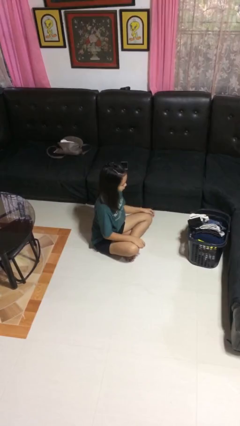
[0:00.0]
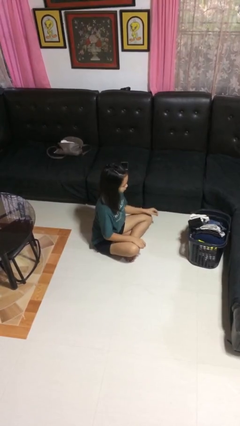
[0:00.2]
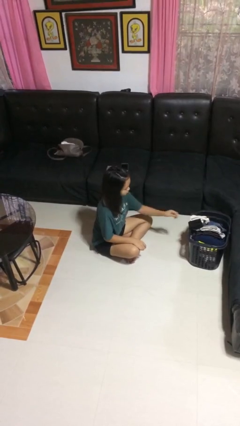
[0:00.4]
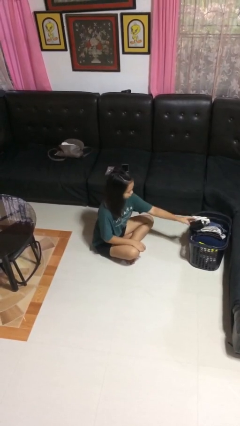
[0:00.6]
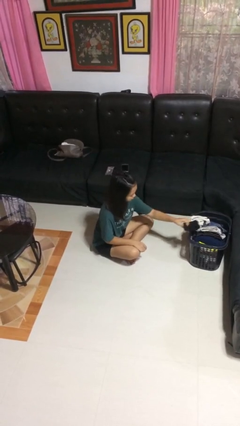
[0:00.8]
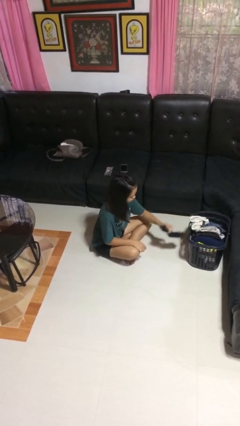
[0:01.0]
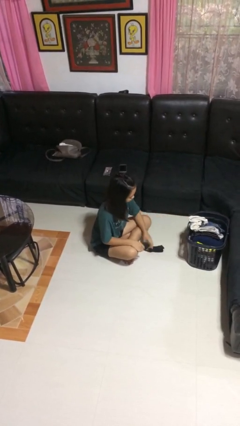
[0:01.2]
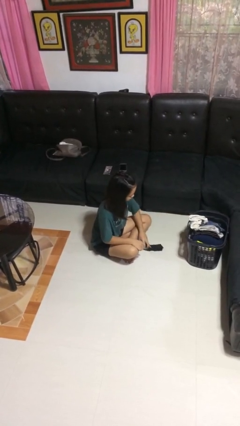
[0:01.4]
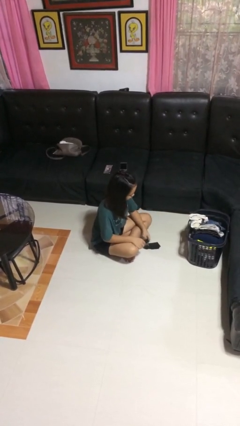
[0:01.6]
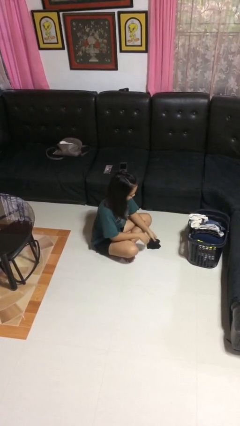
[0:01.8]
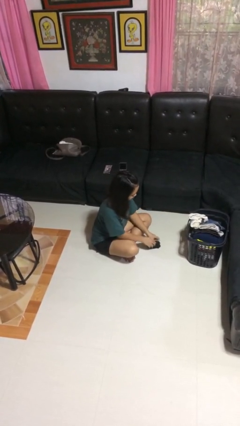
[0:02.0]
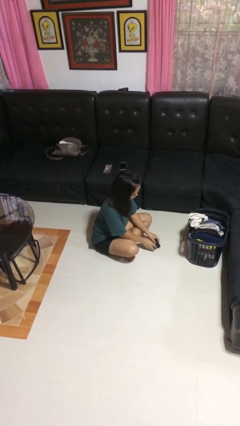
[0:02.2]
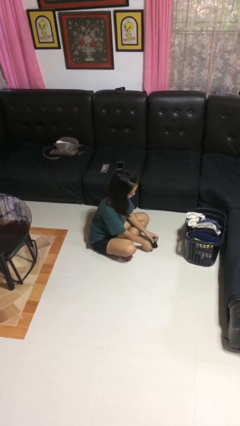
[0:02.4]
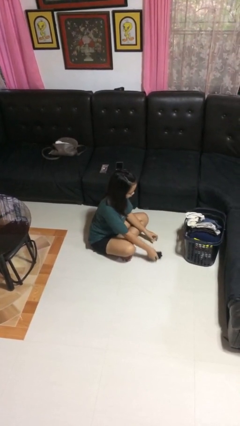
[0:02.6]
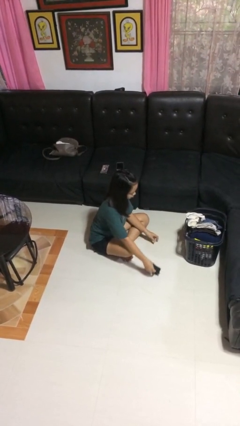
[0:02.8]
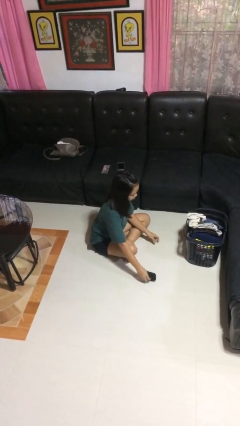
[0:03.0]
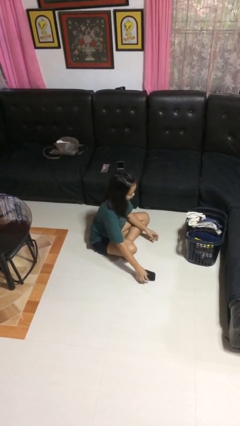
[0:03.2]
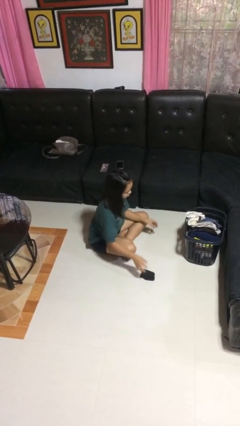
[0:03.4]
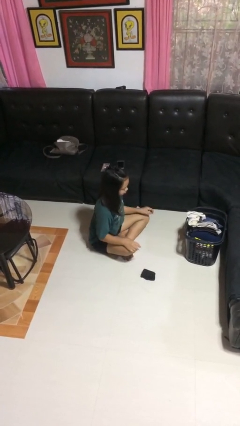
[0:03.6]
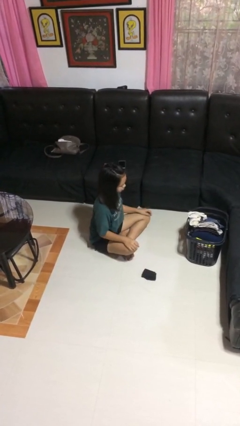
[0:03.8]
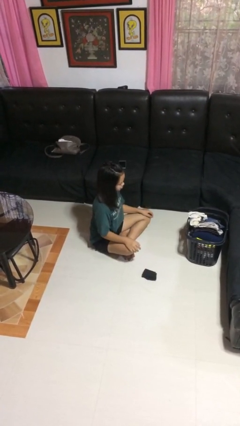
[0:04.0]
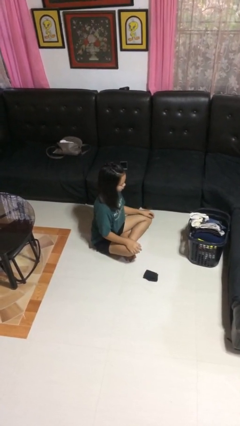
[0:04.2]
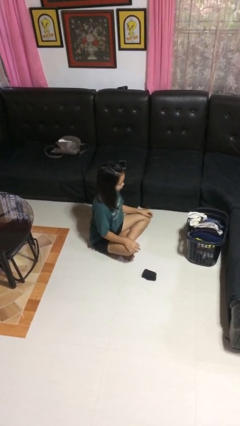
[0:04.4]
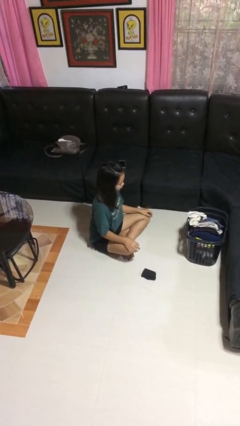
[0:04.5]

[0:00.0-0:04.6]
person folds socks

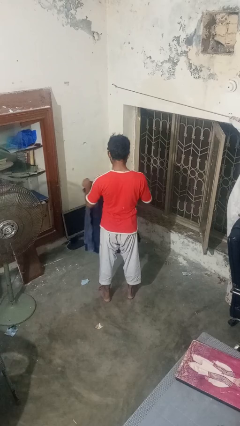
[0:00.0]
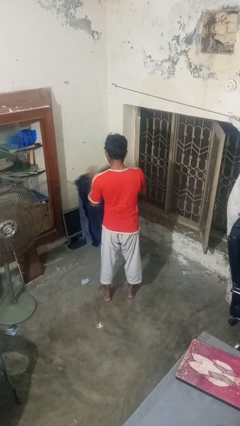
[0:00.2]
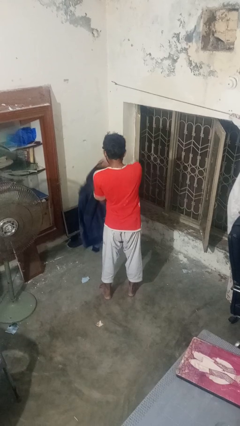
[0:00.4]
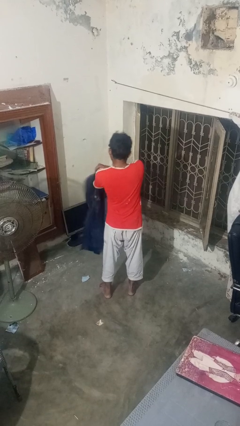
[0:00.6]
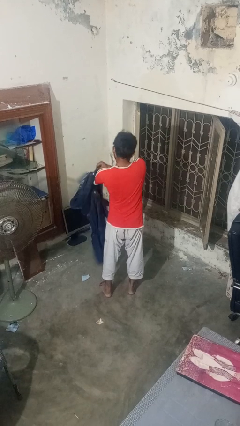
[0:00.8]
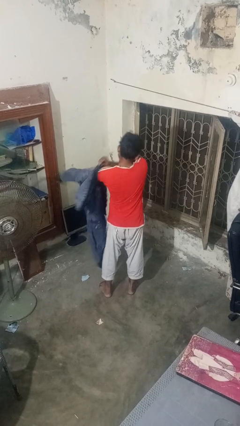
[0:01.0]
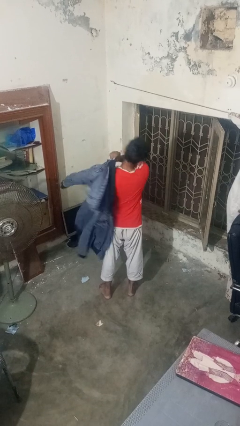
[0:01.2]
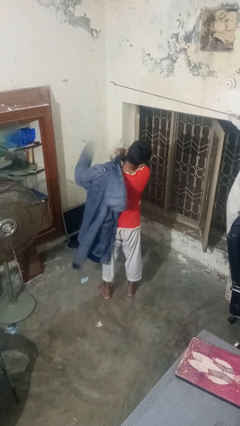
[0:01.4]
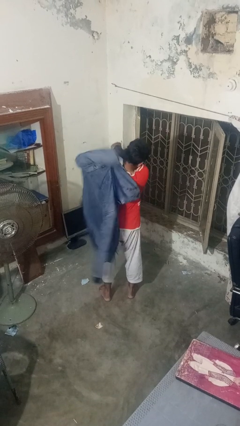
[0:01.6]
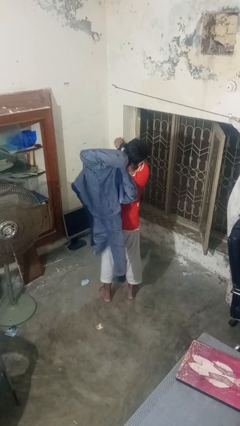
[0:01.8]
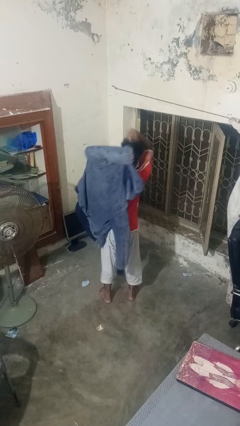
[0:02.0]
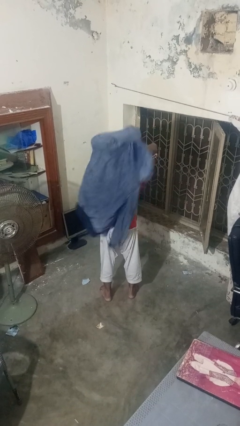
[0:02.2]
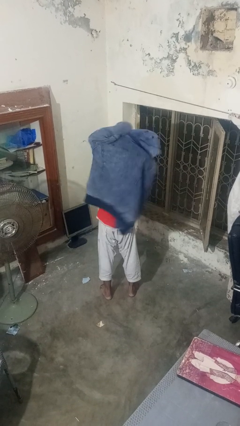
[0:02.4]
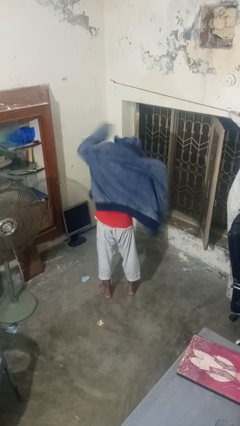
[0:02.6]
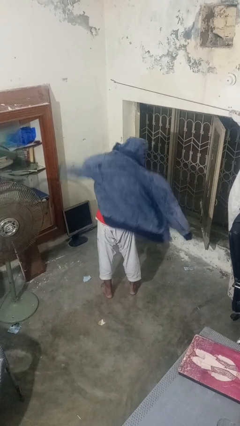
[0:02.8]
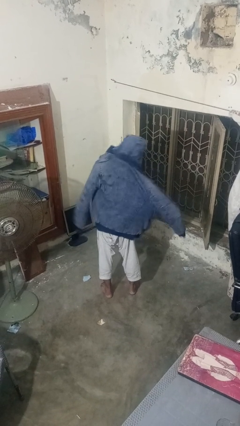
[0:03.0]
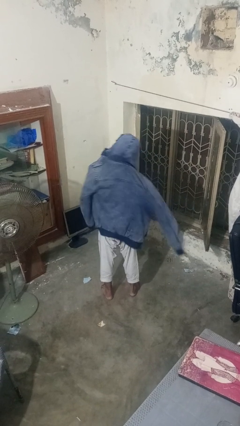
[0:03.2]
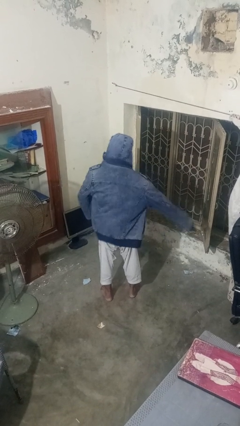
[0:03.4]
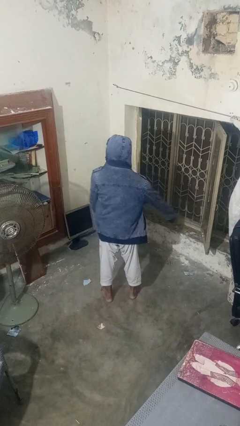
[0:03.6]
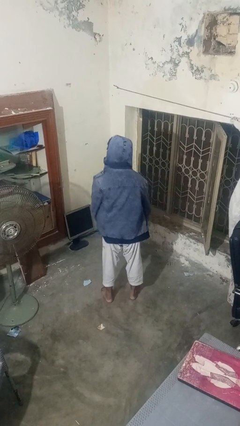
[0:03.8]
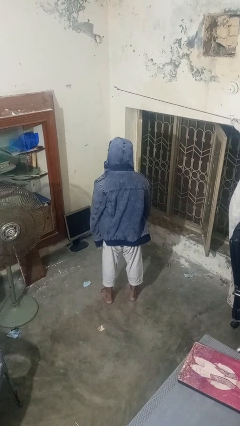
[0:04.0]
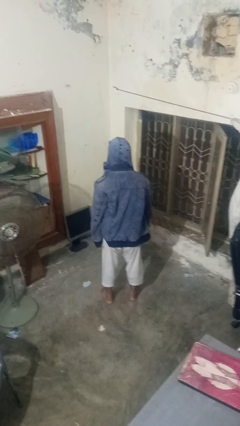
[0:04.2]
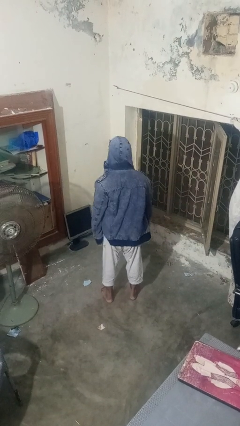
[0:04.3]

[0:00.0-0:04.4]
person puts on hoodie

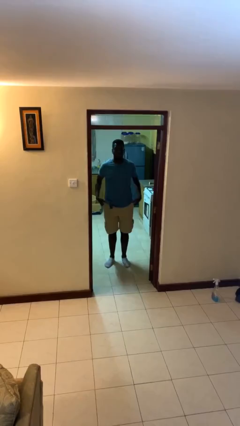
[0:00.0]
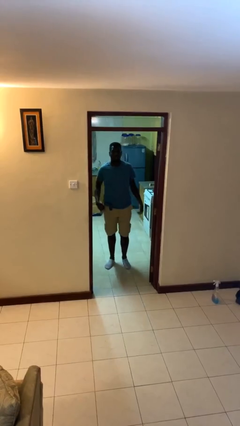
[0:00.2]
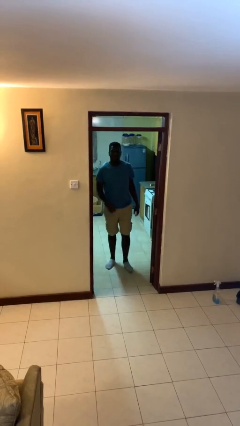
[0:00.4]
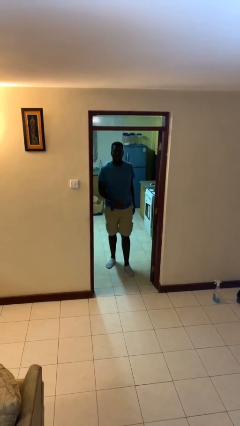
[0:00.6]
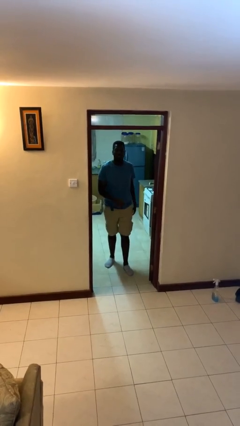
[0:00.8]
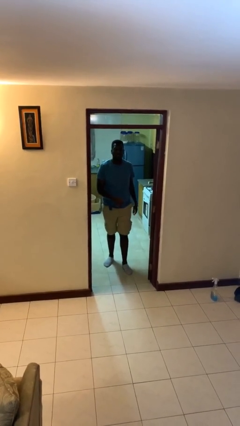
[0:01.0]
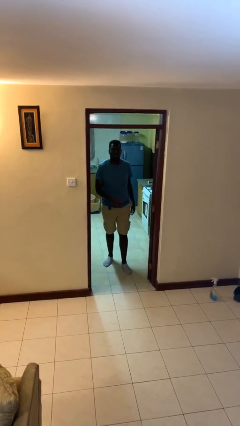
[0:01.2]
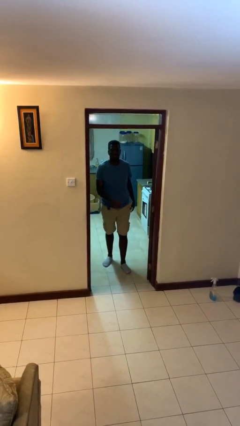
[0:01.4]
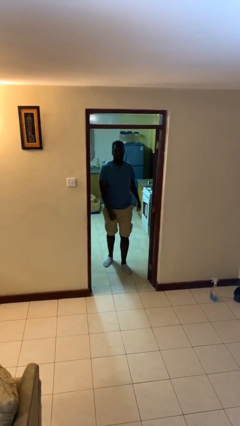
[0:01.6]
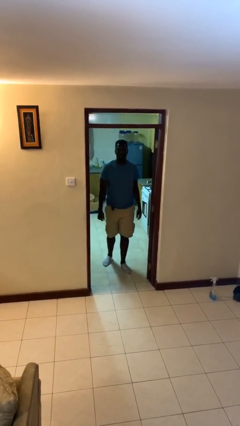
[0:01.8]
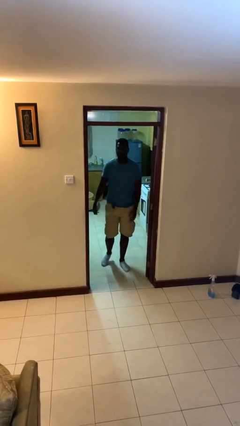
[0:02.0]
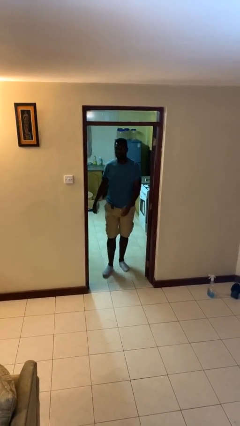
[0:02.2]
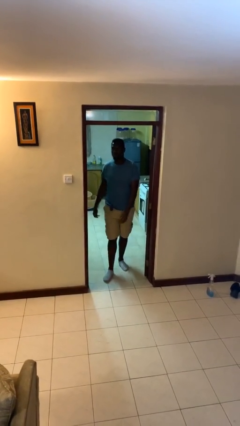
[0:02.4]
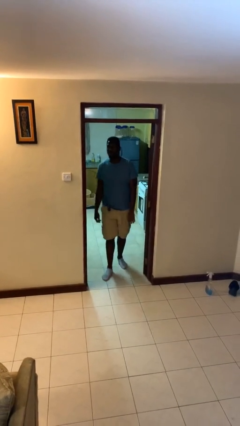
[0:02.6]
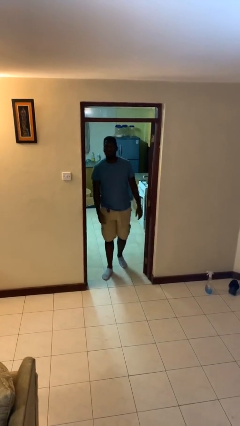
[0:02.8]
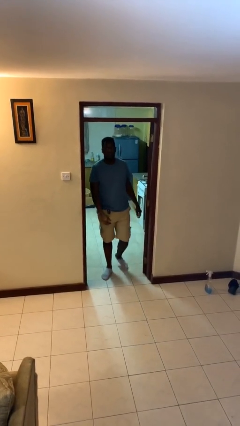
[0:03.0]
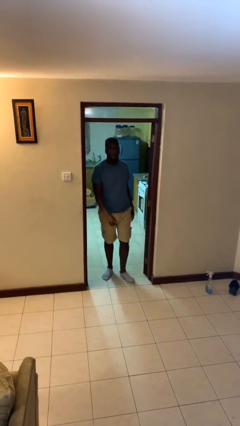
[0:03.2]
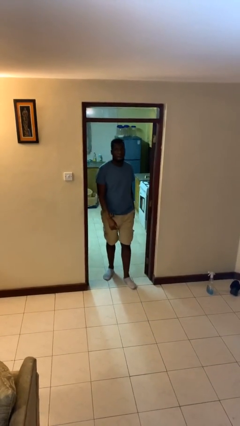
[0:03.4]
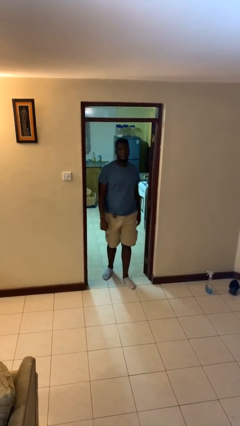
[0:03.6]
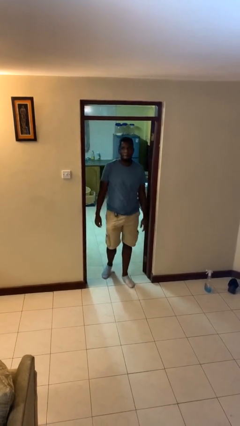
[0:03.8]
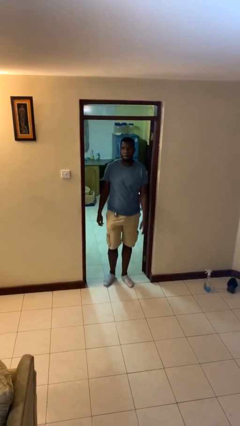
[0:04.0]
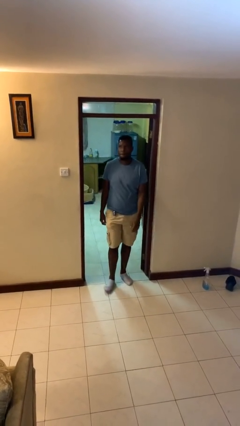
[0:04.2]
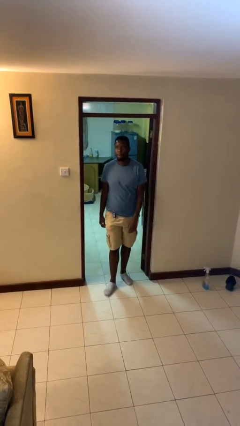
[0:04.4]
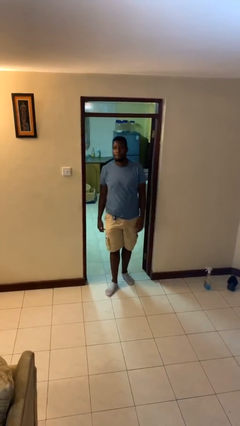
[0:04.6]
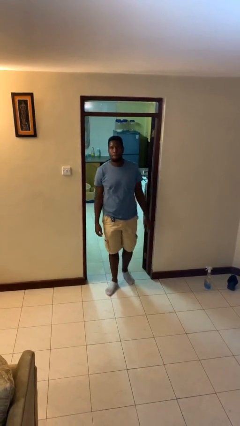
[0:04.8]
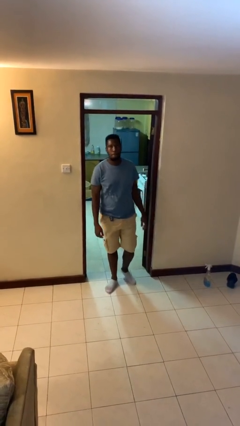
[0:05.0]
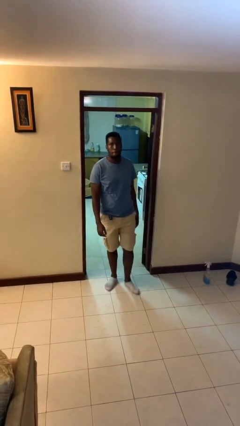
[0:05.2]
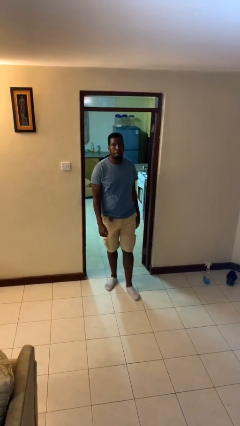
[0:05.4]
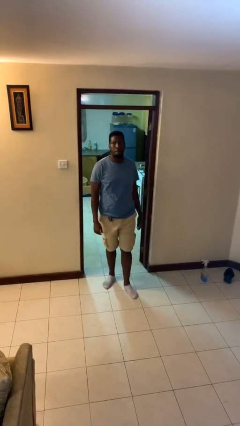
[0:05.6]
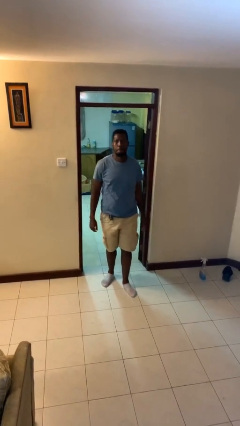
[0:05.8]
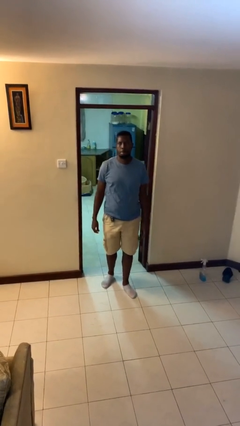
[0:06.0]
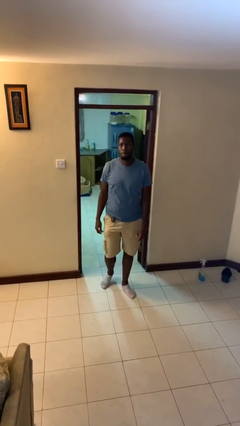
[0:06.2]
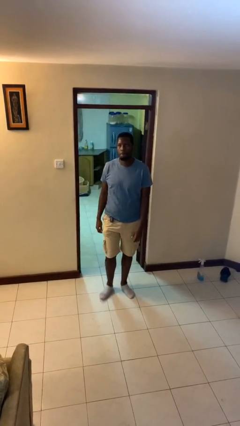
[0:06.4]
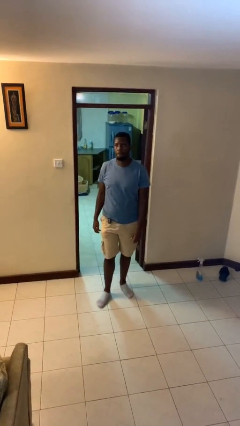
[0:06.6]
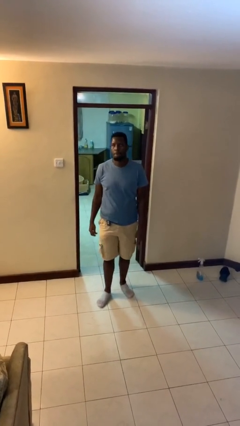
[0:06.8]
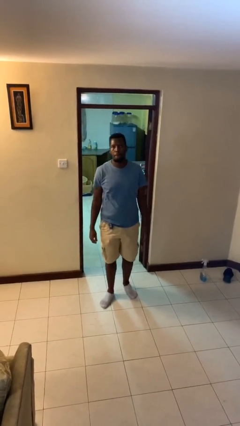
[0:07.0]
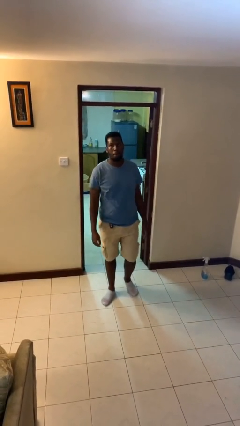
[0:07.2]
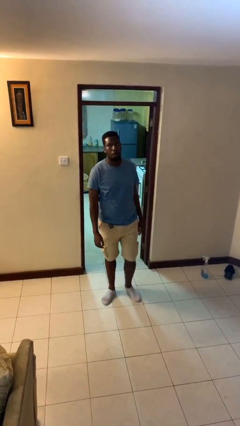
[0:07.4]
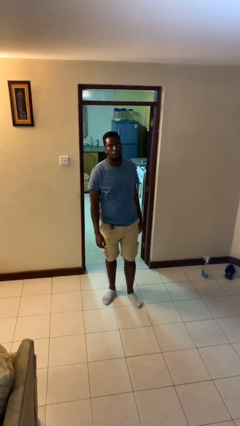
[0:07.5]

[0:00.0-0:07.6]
person enters scene through structure

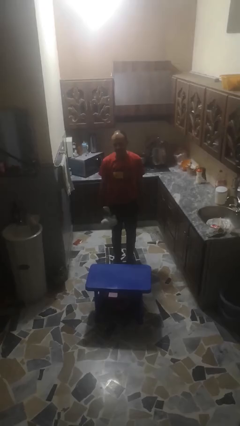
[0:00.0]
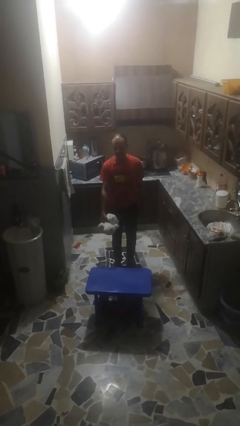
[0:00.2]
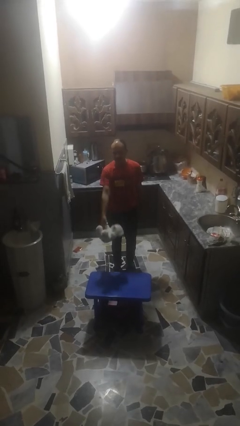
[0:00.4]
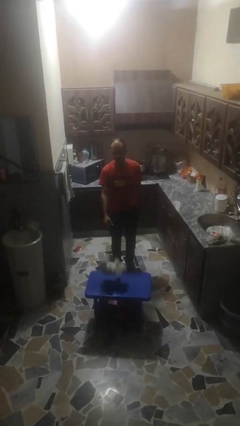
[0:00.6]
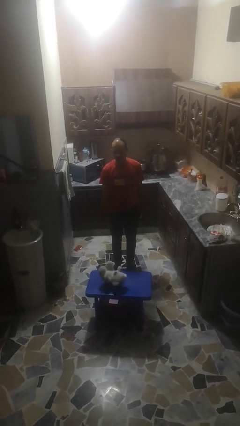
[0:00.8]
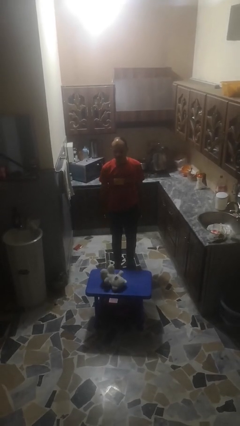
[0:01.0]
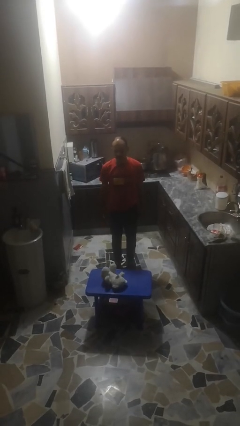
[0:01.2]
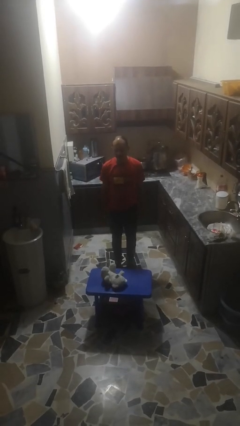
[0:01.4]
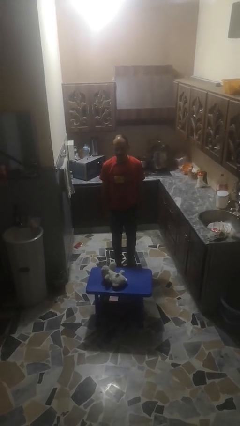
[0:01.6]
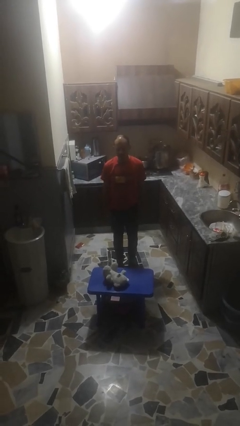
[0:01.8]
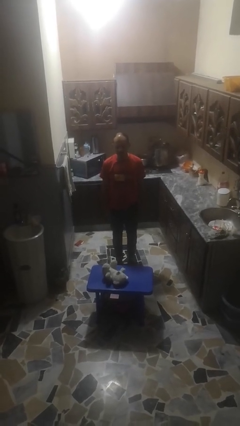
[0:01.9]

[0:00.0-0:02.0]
person throws object to ground
